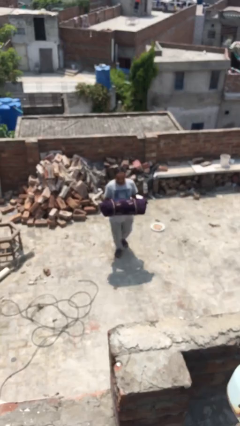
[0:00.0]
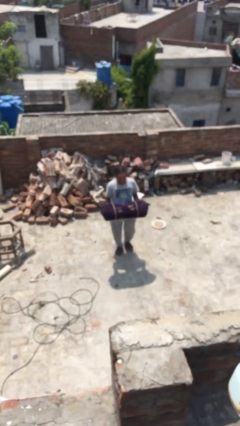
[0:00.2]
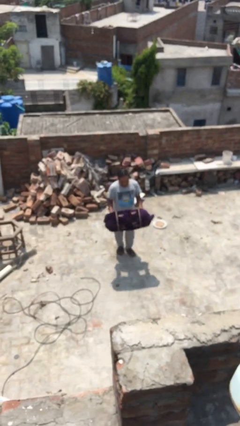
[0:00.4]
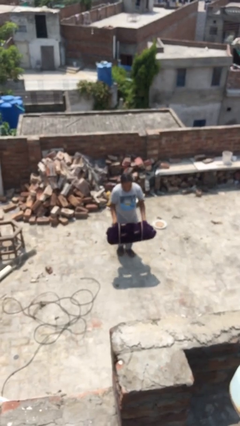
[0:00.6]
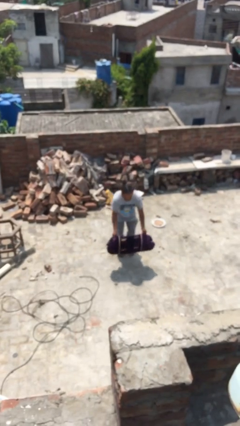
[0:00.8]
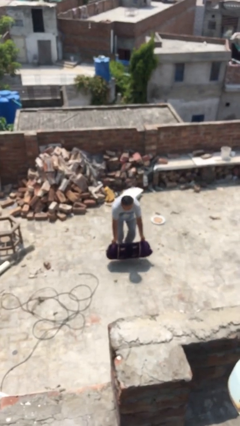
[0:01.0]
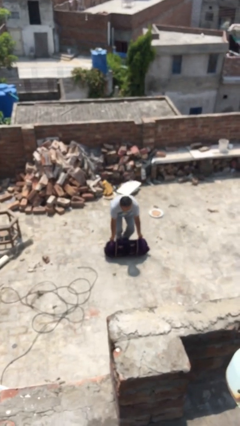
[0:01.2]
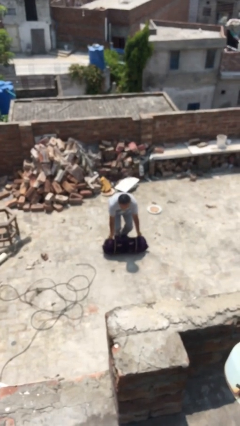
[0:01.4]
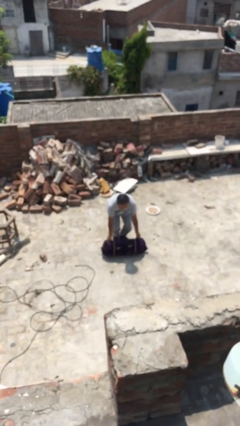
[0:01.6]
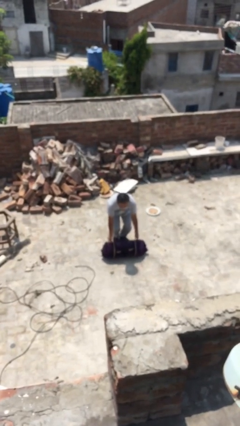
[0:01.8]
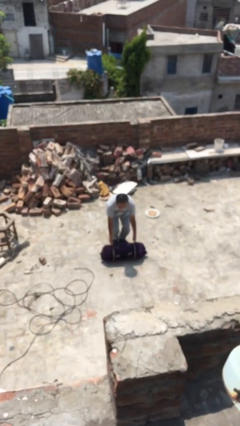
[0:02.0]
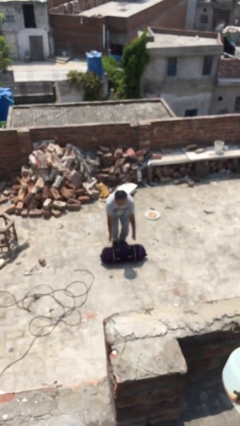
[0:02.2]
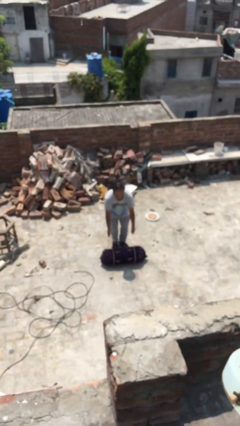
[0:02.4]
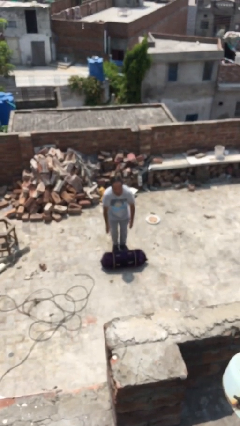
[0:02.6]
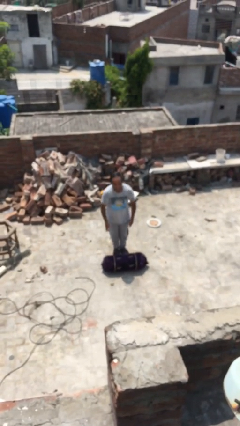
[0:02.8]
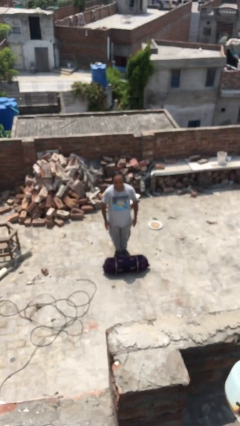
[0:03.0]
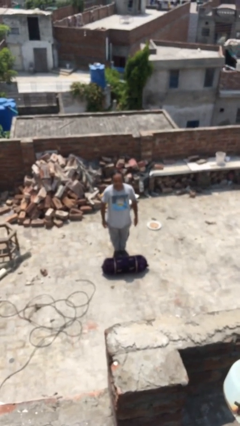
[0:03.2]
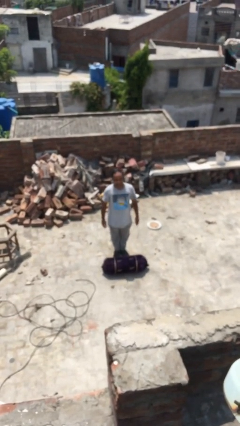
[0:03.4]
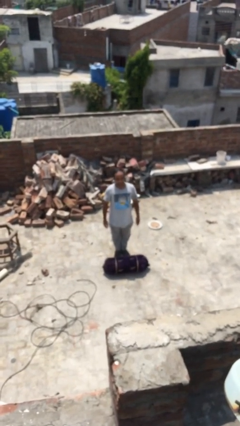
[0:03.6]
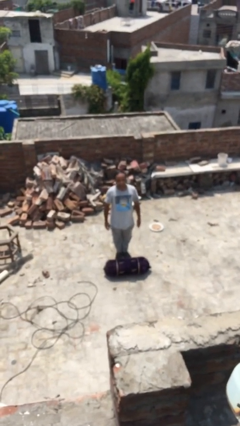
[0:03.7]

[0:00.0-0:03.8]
person puts down object on floor

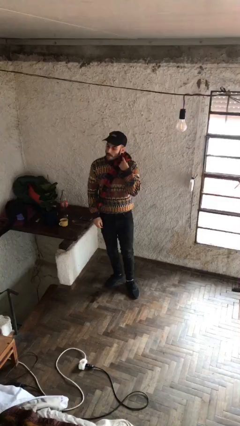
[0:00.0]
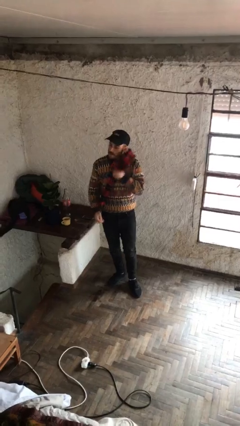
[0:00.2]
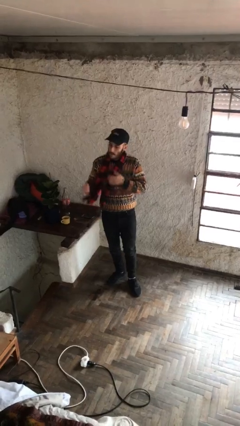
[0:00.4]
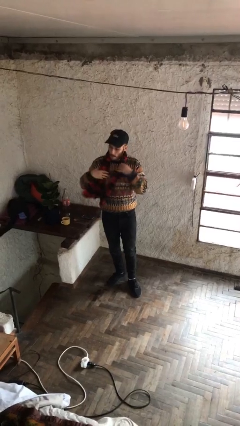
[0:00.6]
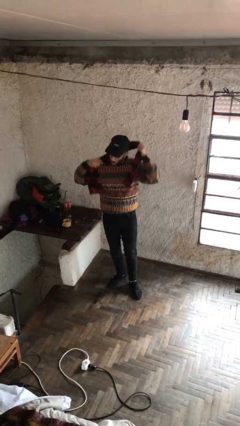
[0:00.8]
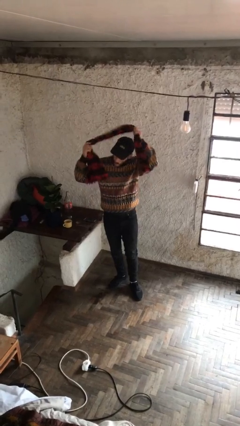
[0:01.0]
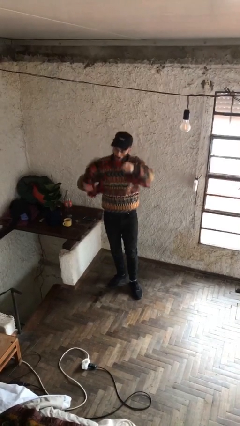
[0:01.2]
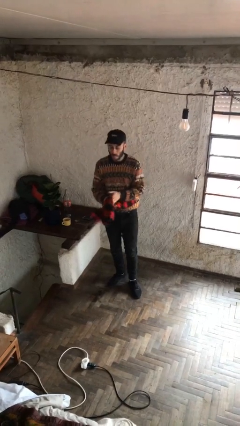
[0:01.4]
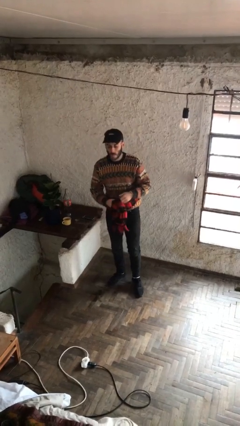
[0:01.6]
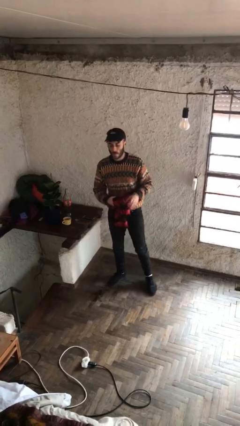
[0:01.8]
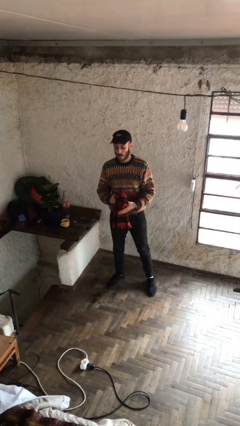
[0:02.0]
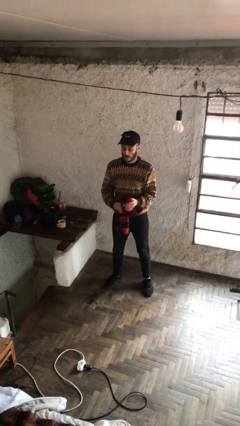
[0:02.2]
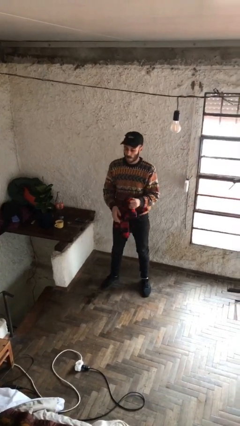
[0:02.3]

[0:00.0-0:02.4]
person takes off scarf

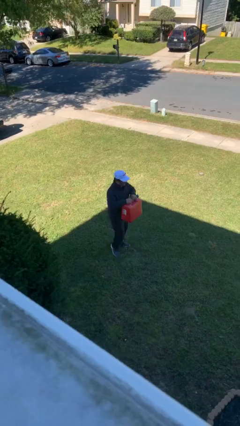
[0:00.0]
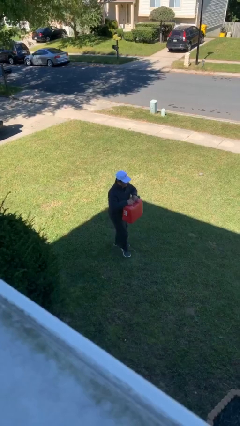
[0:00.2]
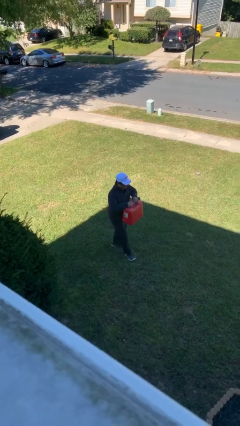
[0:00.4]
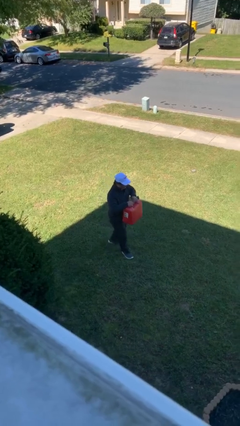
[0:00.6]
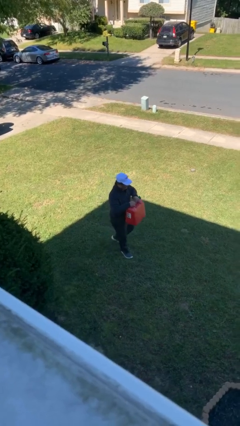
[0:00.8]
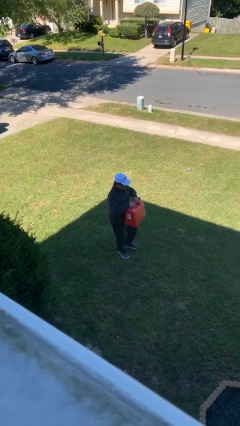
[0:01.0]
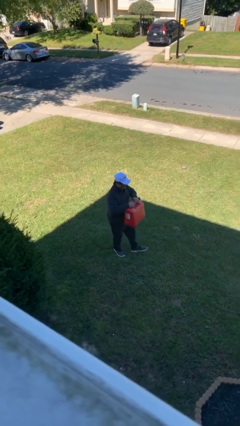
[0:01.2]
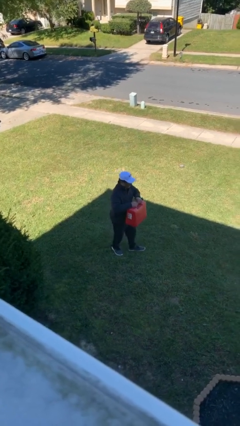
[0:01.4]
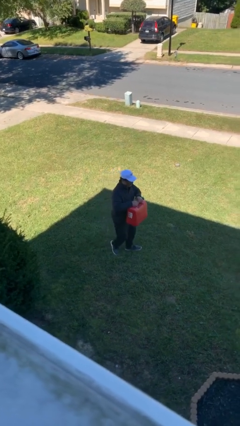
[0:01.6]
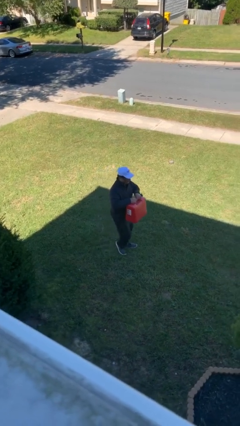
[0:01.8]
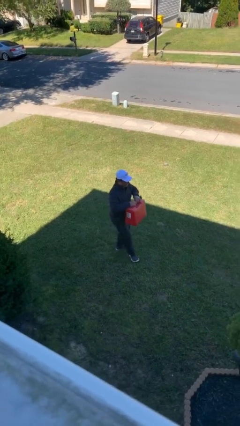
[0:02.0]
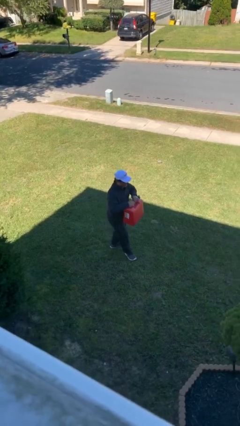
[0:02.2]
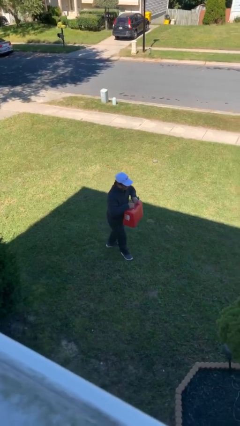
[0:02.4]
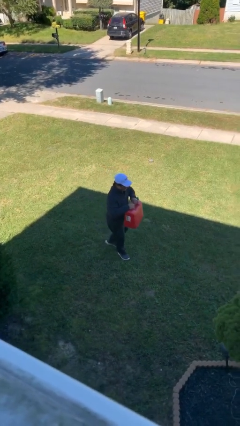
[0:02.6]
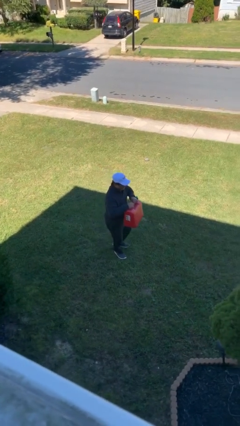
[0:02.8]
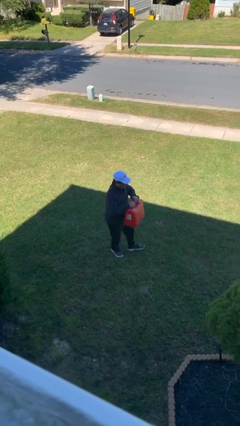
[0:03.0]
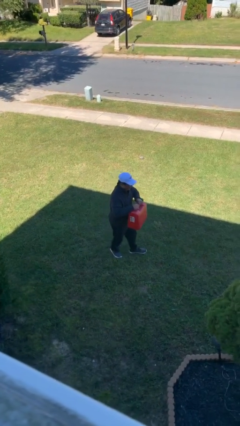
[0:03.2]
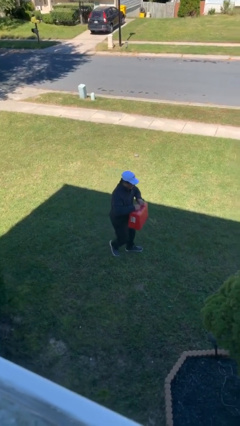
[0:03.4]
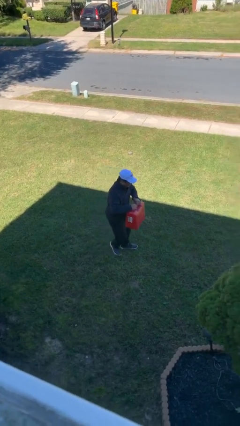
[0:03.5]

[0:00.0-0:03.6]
person carries heavy object

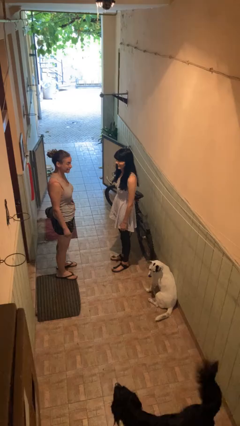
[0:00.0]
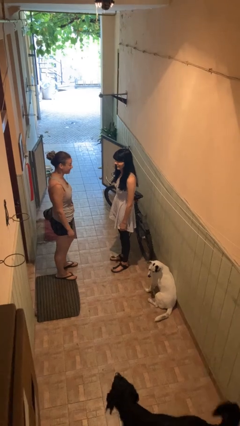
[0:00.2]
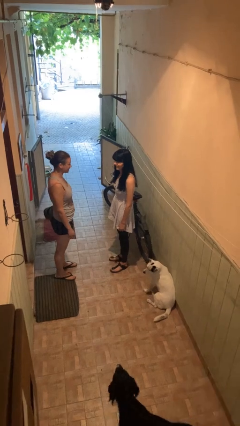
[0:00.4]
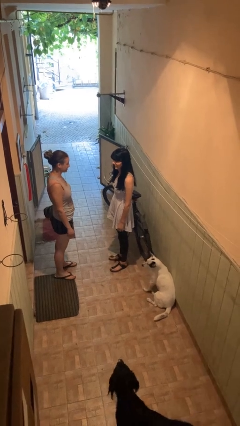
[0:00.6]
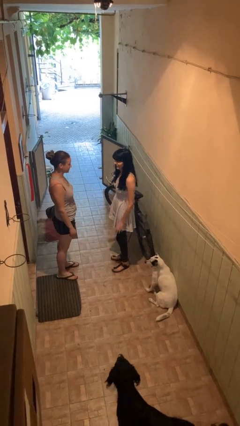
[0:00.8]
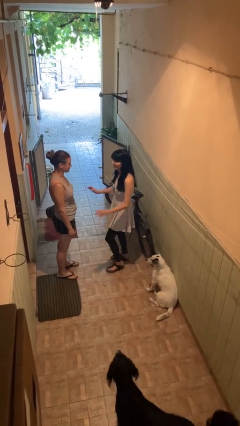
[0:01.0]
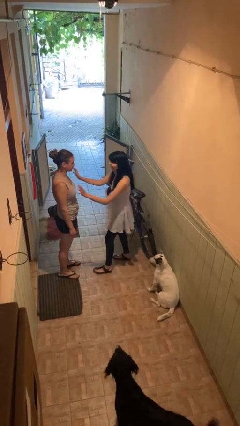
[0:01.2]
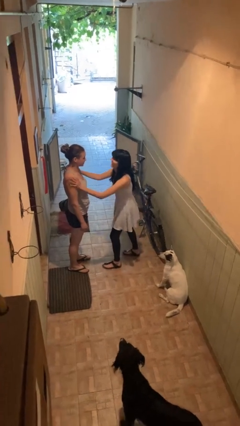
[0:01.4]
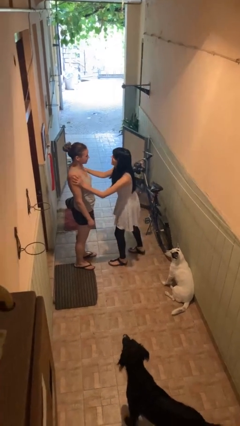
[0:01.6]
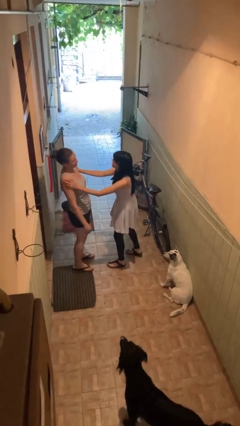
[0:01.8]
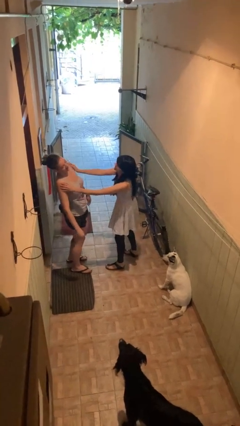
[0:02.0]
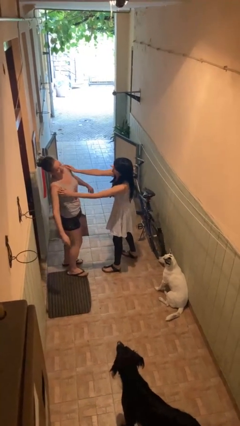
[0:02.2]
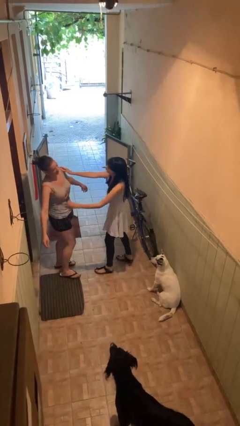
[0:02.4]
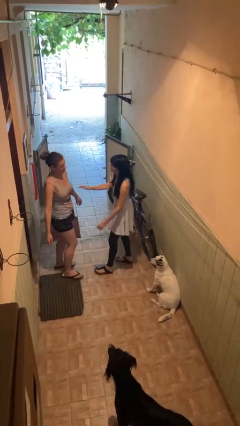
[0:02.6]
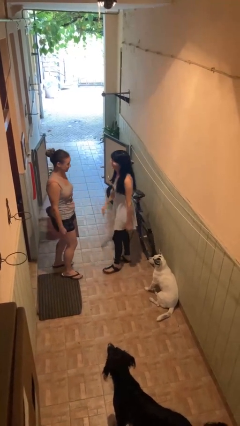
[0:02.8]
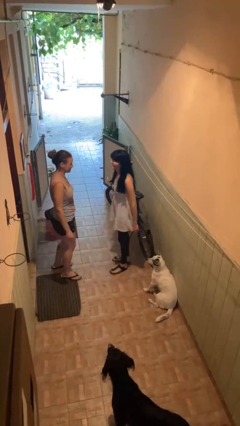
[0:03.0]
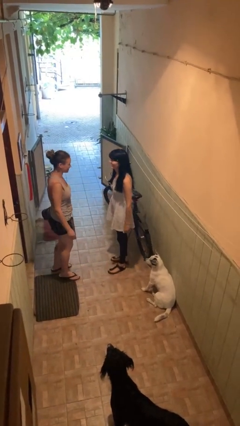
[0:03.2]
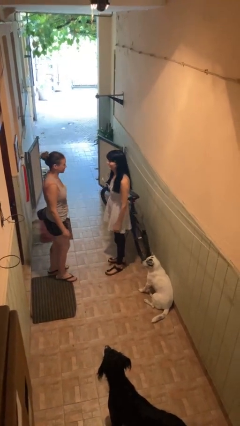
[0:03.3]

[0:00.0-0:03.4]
person shoves person

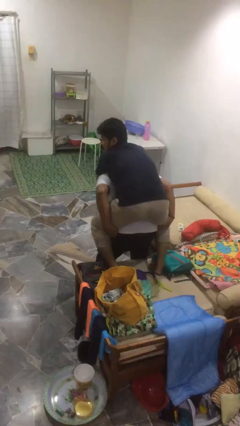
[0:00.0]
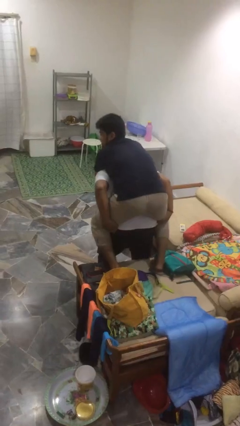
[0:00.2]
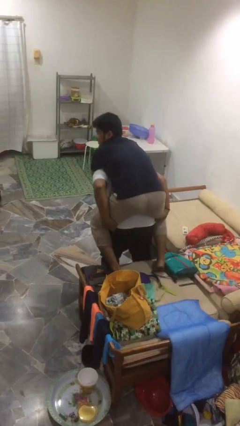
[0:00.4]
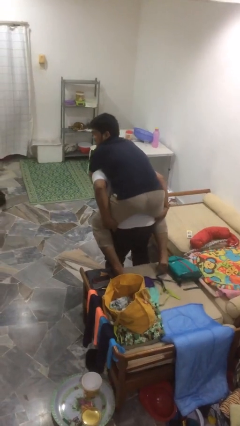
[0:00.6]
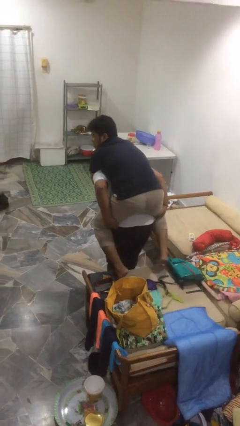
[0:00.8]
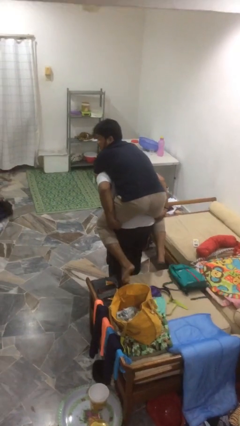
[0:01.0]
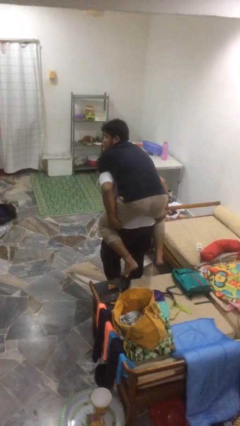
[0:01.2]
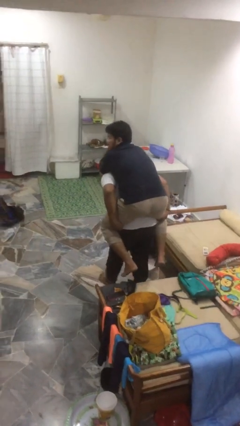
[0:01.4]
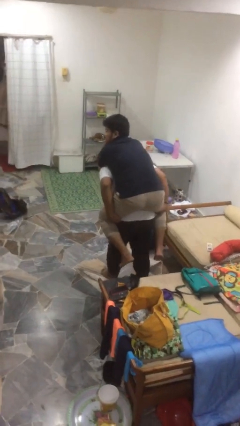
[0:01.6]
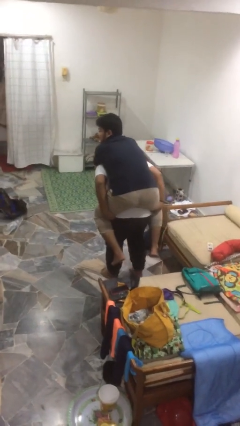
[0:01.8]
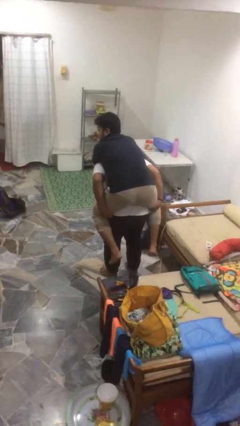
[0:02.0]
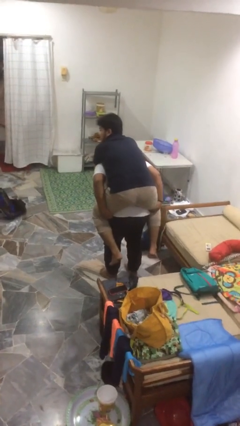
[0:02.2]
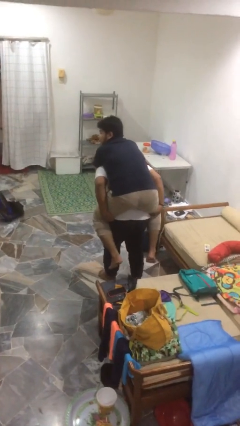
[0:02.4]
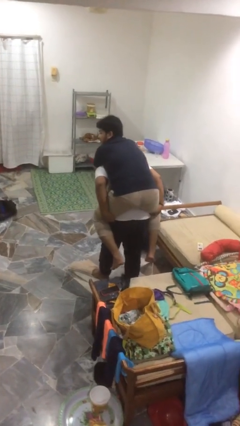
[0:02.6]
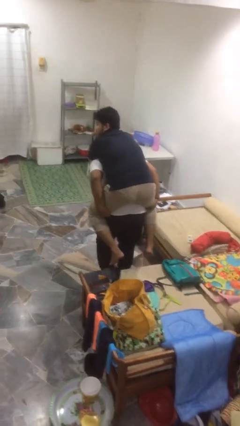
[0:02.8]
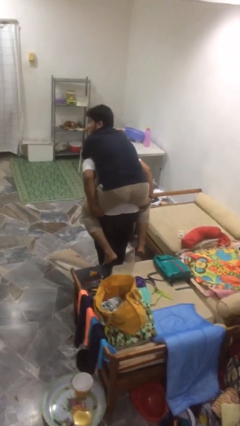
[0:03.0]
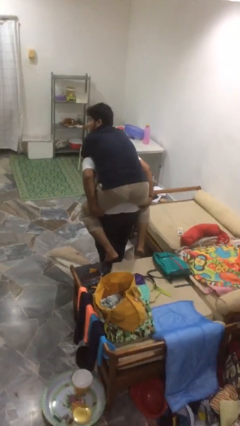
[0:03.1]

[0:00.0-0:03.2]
person carries person on back

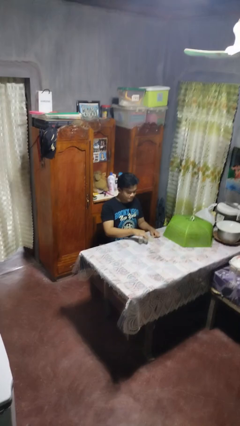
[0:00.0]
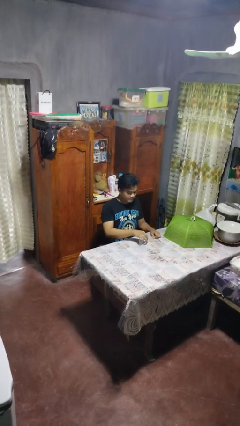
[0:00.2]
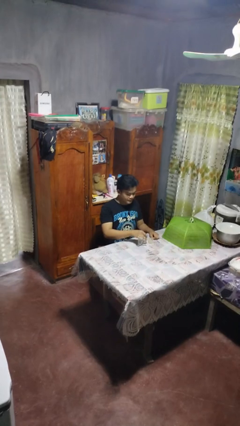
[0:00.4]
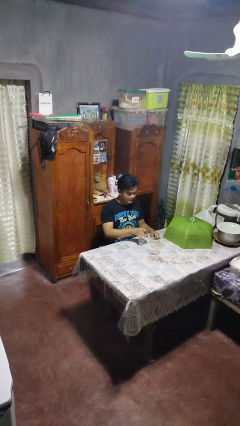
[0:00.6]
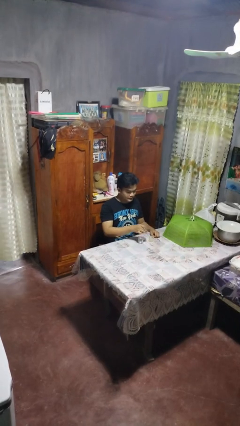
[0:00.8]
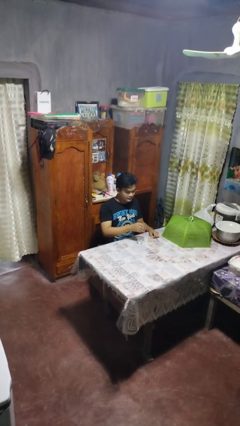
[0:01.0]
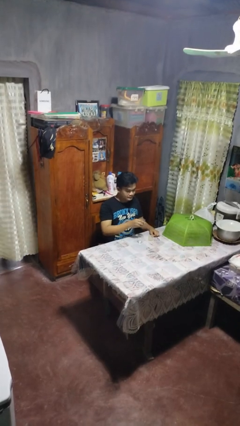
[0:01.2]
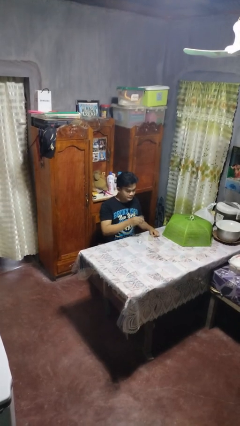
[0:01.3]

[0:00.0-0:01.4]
person picks up object from table

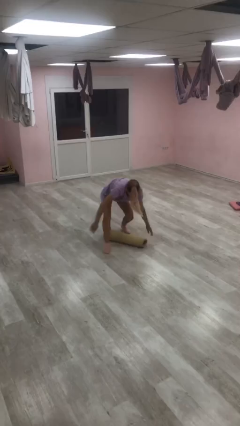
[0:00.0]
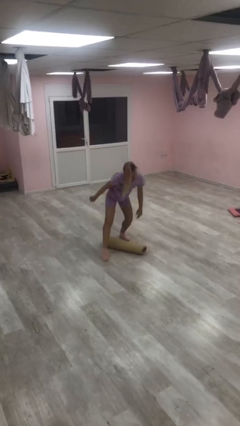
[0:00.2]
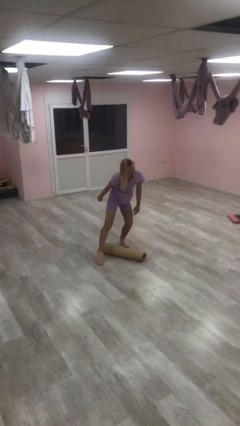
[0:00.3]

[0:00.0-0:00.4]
person stands up from floor
